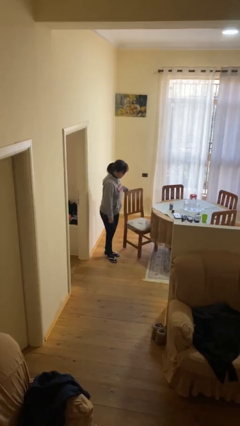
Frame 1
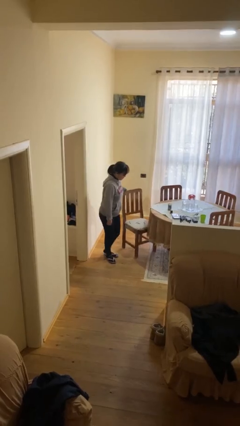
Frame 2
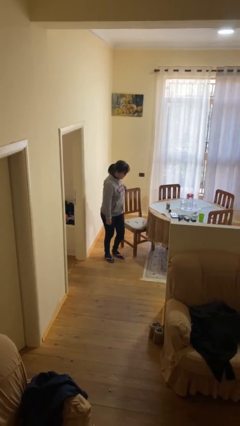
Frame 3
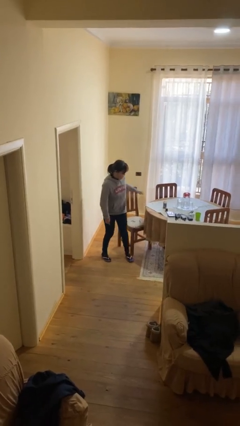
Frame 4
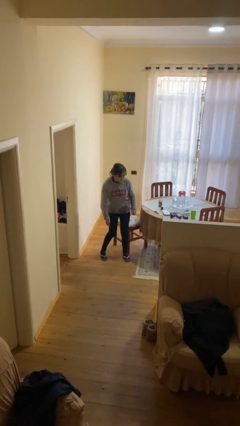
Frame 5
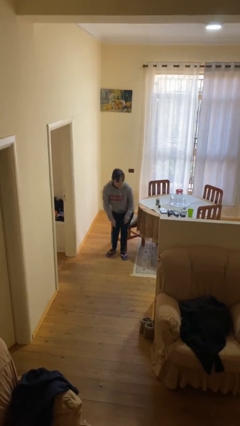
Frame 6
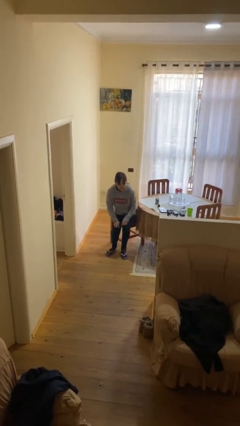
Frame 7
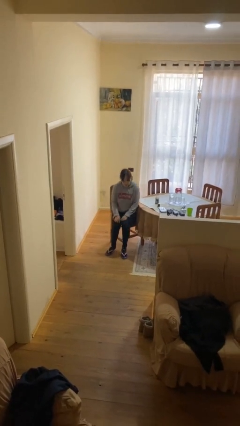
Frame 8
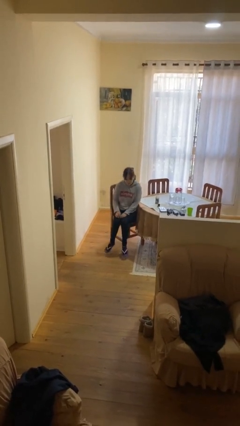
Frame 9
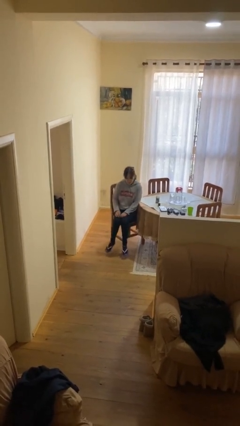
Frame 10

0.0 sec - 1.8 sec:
person sits down

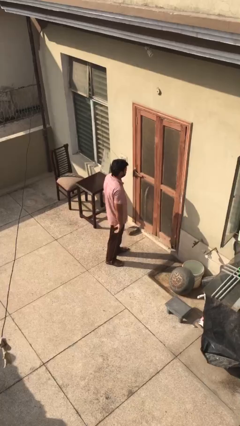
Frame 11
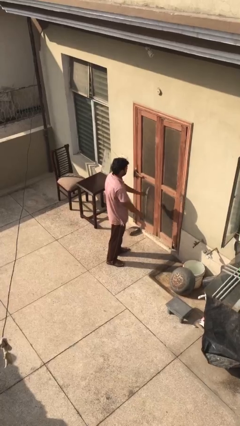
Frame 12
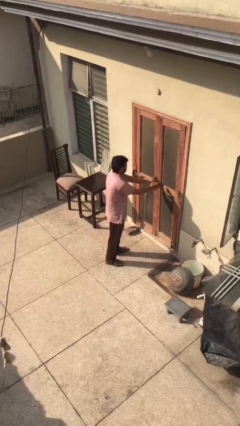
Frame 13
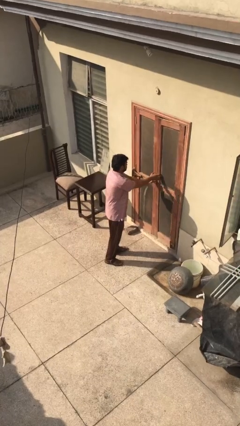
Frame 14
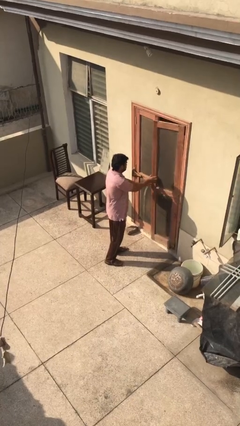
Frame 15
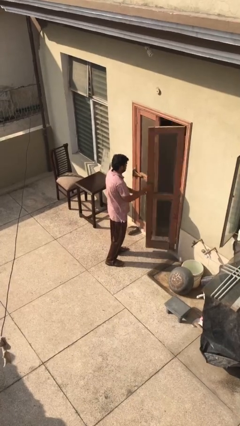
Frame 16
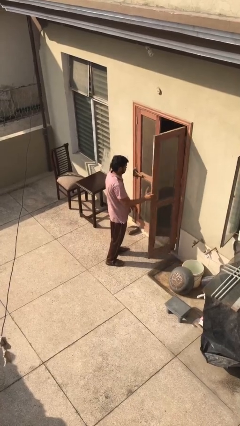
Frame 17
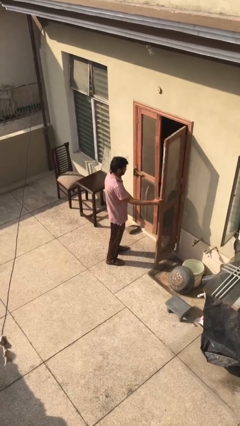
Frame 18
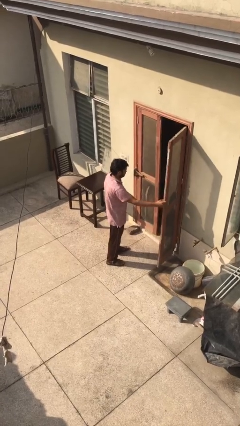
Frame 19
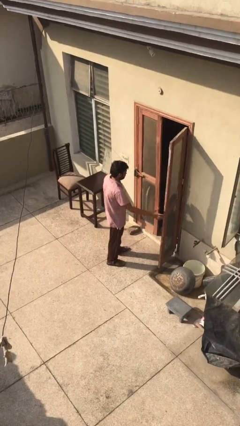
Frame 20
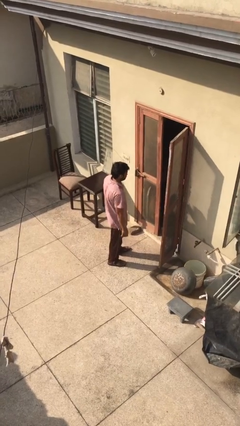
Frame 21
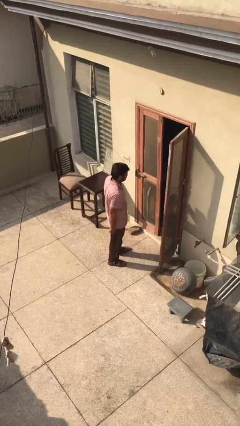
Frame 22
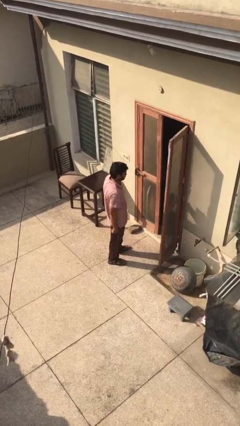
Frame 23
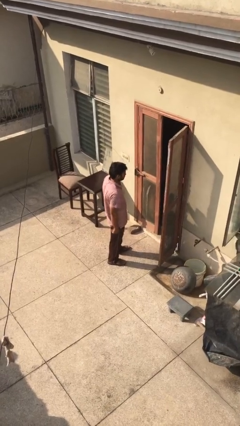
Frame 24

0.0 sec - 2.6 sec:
person opens facility door

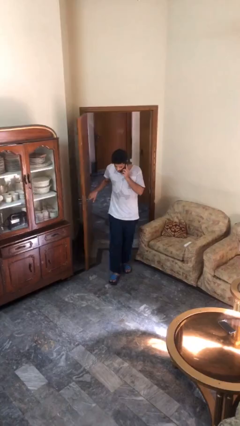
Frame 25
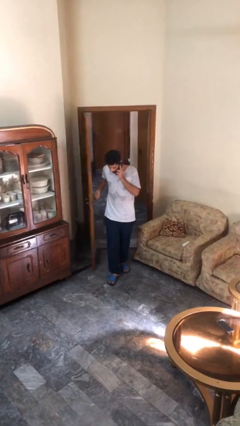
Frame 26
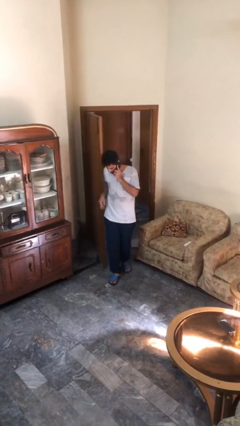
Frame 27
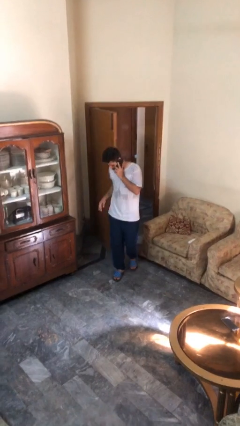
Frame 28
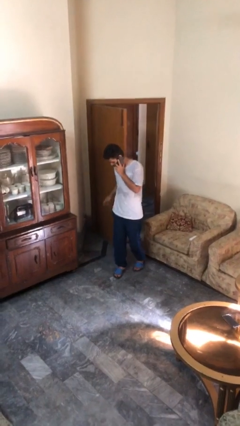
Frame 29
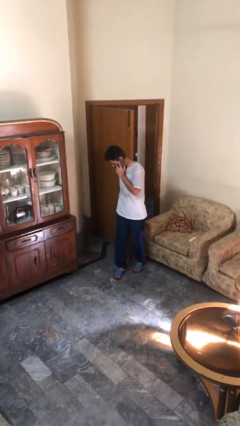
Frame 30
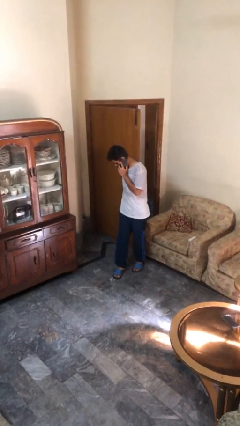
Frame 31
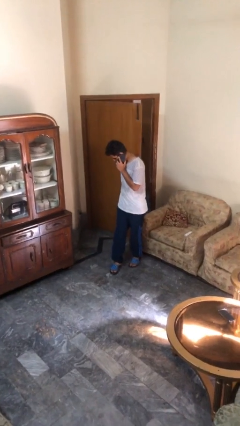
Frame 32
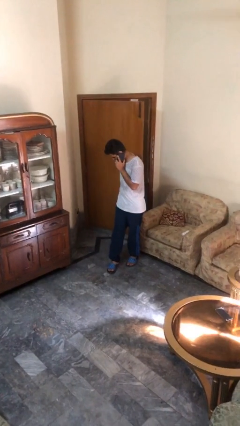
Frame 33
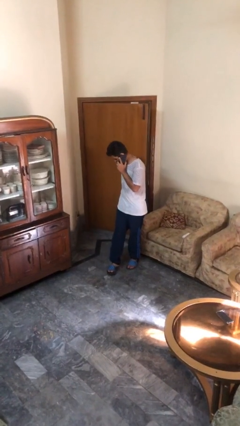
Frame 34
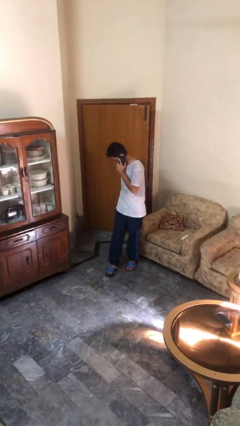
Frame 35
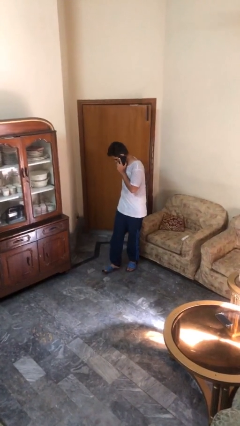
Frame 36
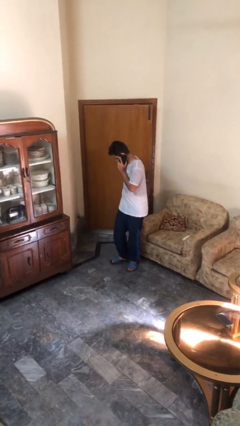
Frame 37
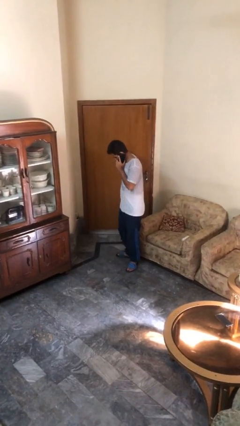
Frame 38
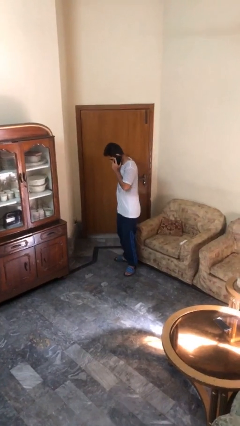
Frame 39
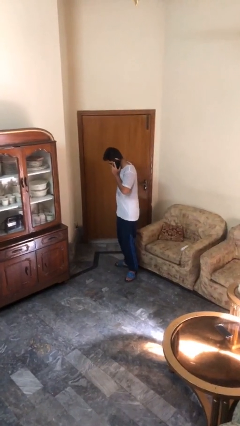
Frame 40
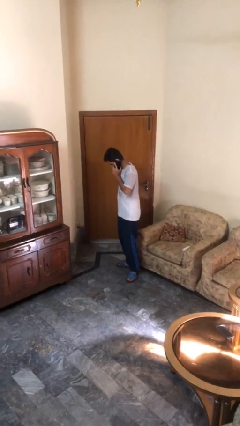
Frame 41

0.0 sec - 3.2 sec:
person closes facility door

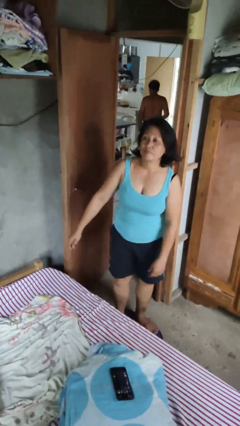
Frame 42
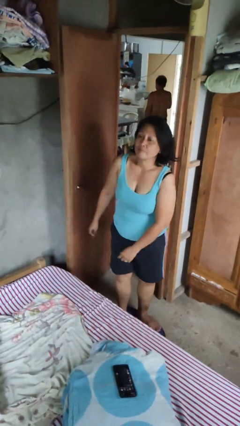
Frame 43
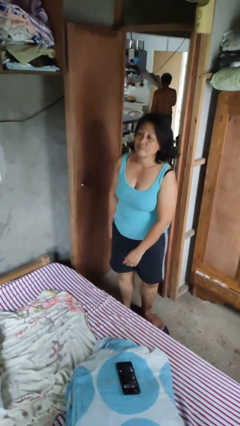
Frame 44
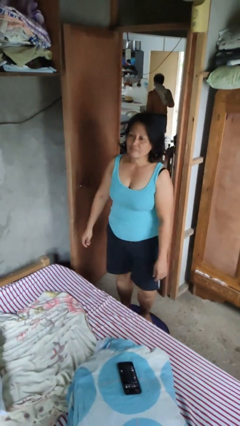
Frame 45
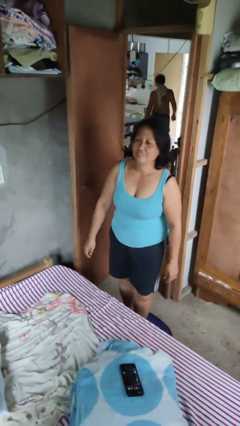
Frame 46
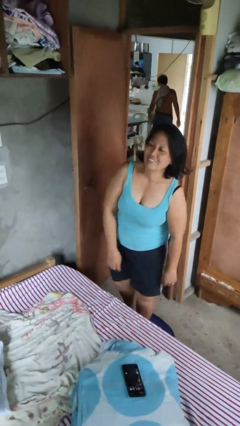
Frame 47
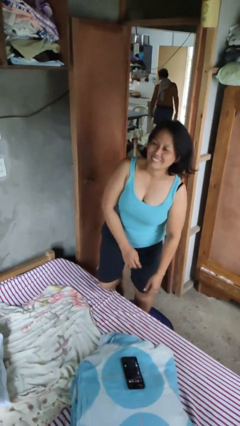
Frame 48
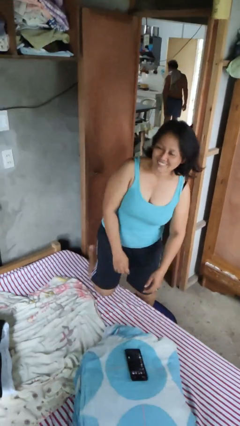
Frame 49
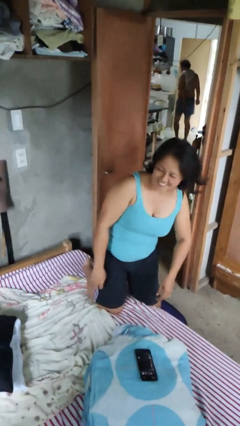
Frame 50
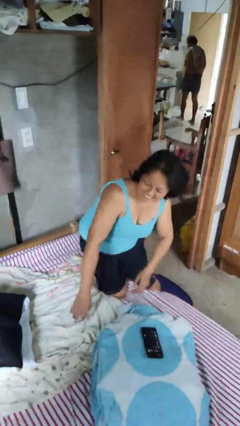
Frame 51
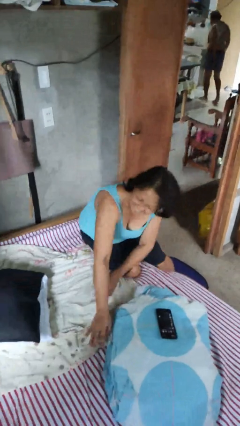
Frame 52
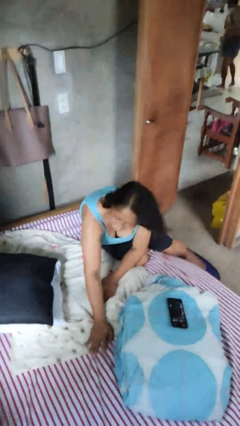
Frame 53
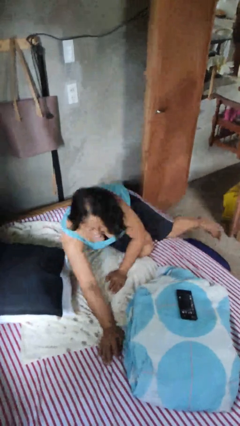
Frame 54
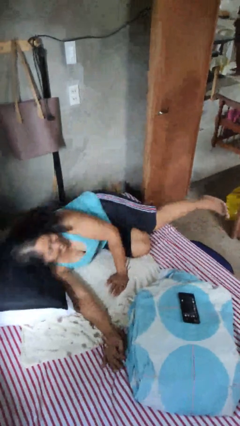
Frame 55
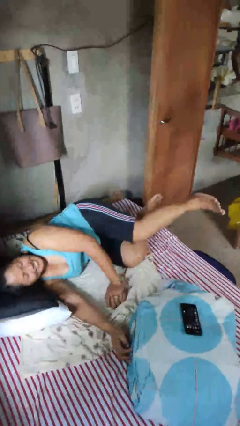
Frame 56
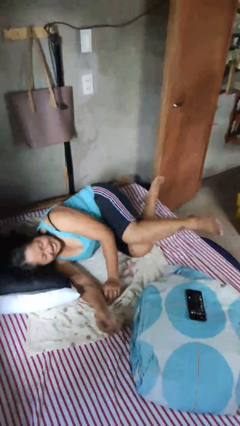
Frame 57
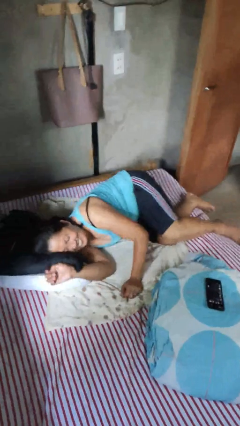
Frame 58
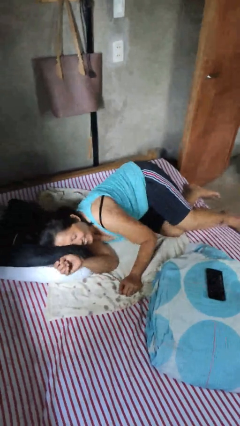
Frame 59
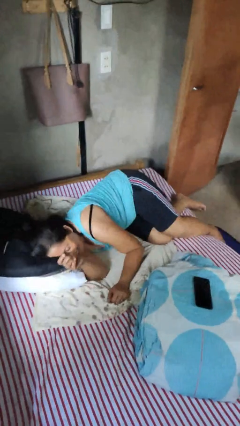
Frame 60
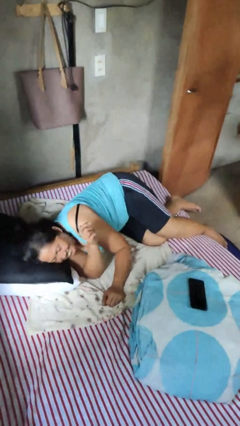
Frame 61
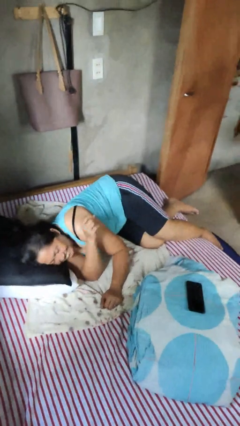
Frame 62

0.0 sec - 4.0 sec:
person lies down on bed

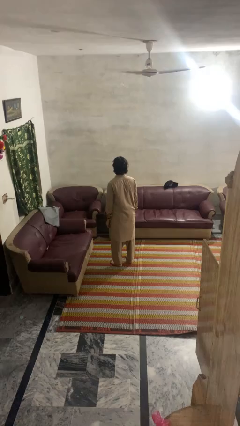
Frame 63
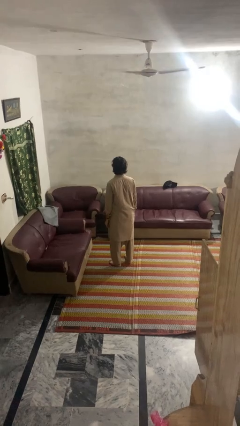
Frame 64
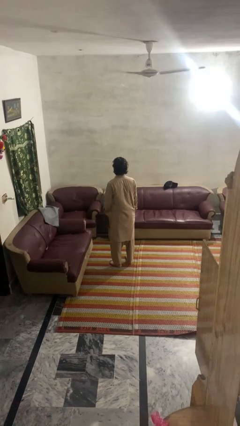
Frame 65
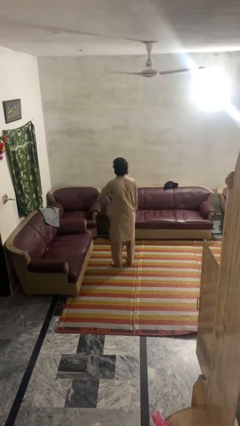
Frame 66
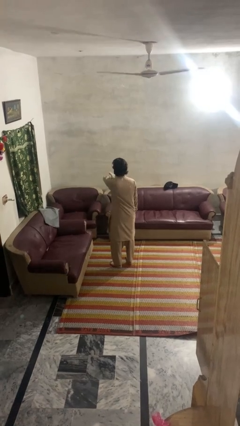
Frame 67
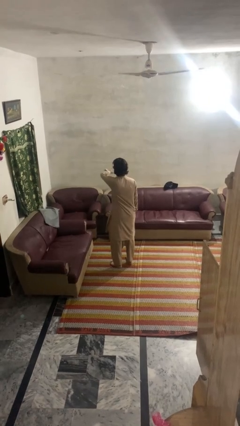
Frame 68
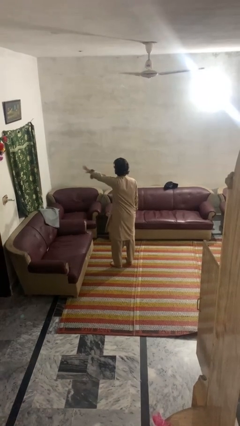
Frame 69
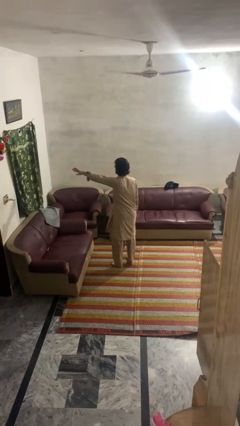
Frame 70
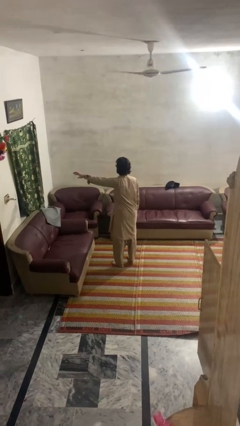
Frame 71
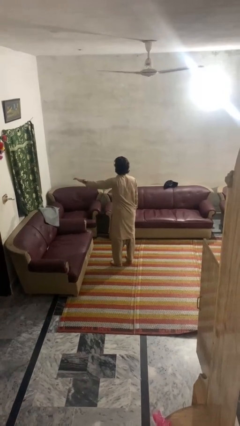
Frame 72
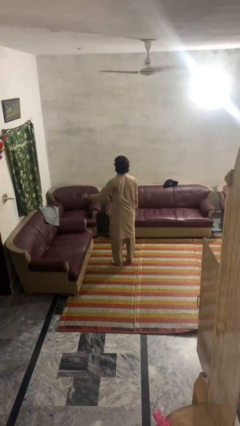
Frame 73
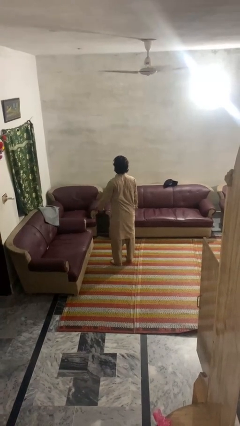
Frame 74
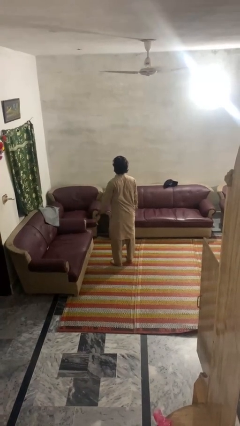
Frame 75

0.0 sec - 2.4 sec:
person gestures swipe left

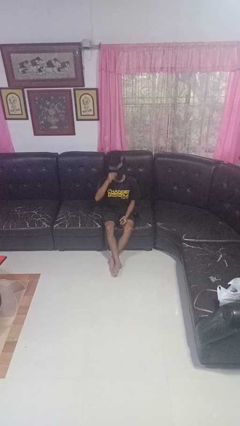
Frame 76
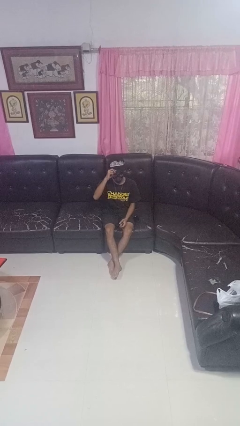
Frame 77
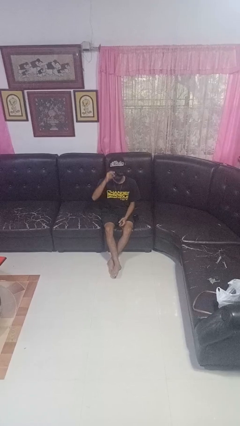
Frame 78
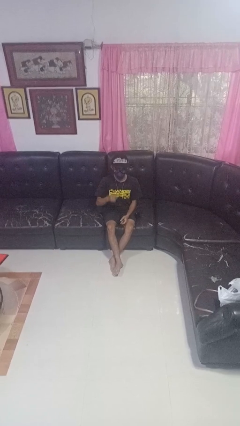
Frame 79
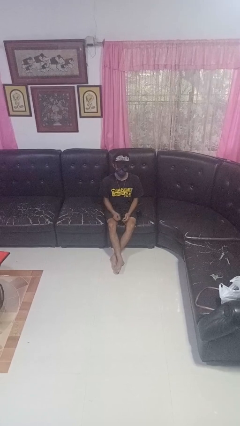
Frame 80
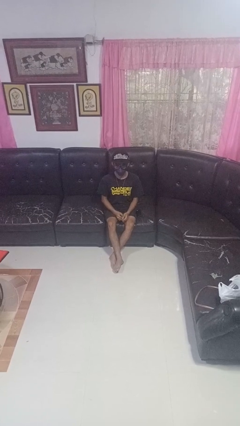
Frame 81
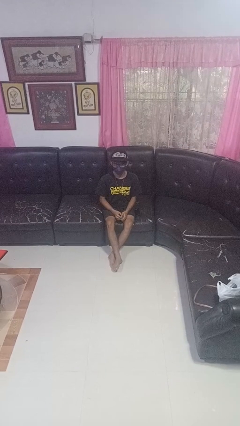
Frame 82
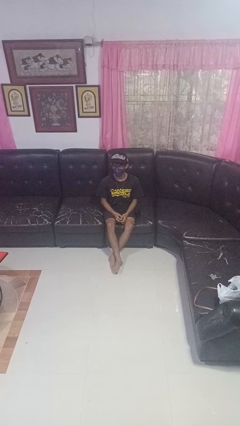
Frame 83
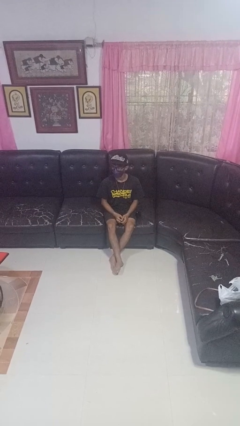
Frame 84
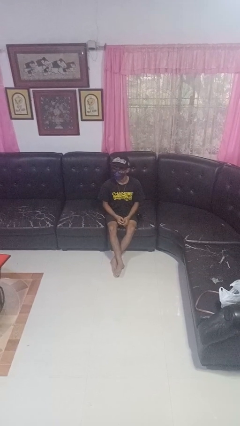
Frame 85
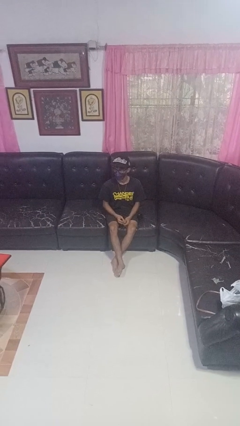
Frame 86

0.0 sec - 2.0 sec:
person puts on hat

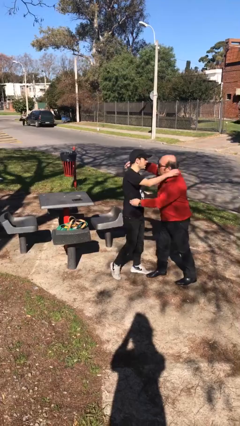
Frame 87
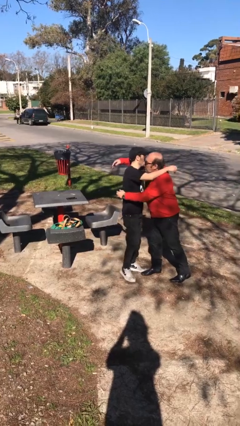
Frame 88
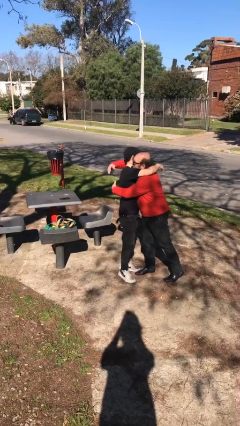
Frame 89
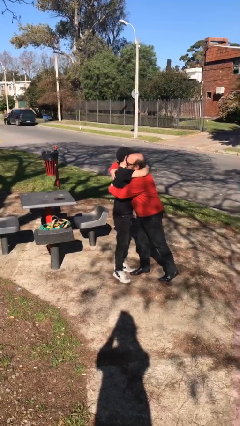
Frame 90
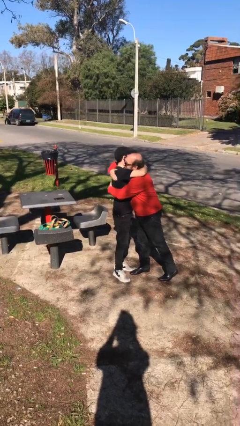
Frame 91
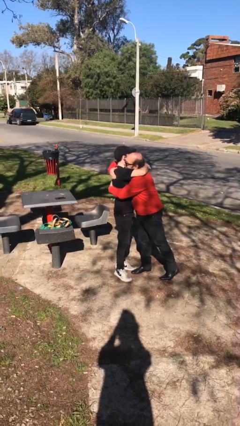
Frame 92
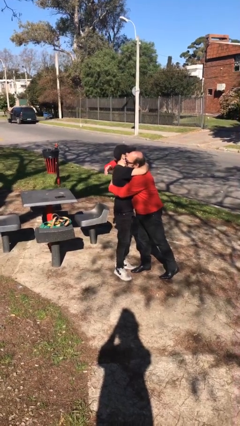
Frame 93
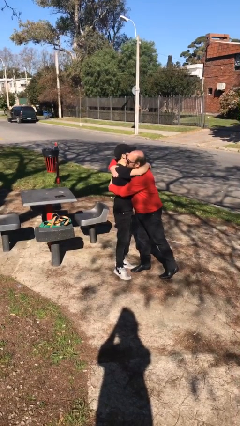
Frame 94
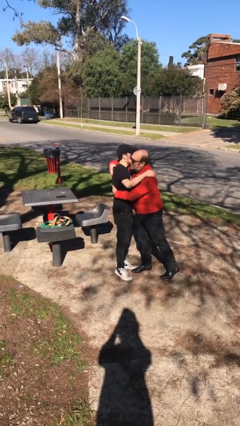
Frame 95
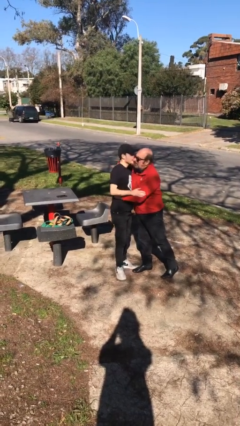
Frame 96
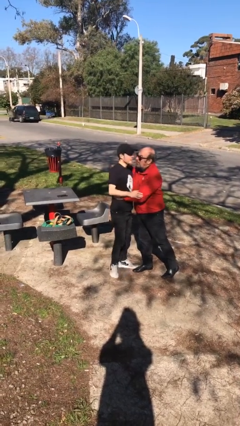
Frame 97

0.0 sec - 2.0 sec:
person embraces person
